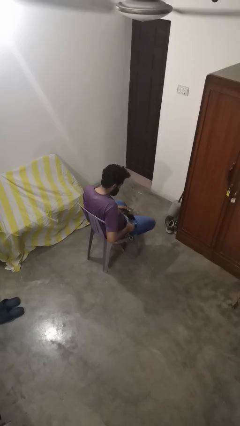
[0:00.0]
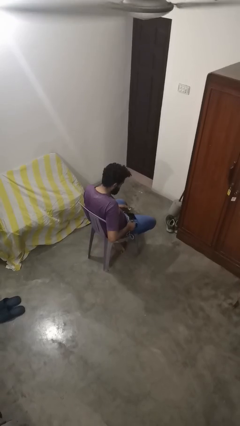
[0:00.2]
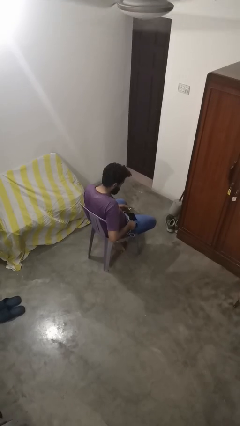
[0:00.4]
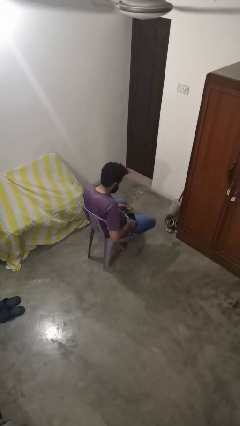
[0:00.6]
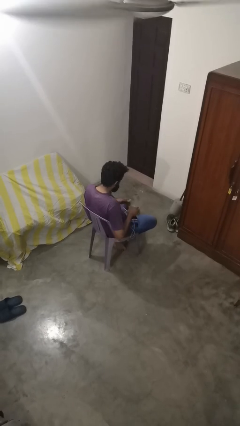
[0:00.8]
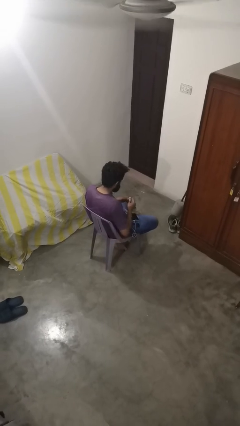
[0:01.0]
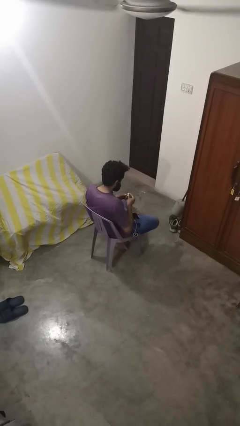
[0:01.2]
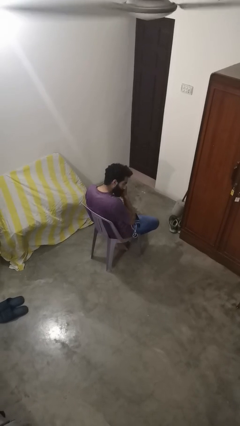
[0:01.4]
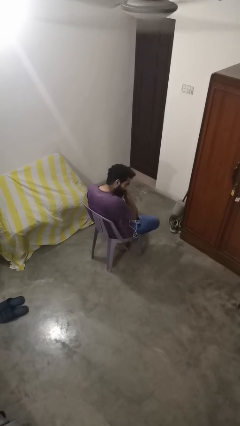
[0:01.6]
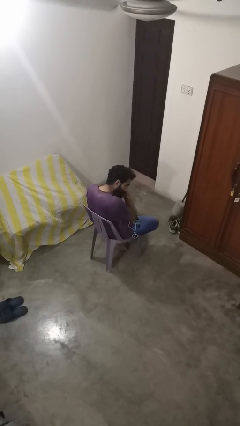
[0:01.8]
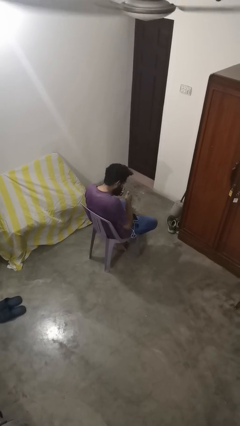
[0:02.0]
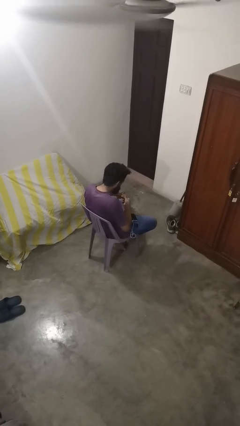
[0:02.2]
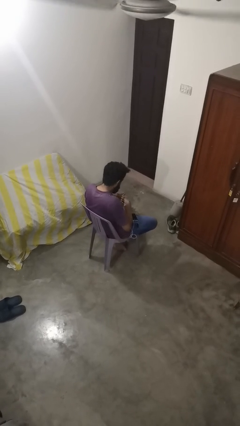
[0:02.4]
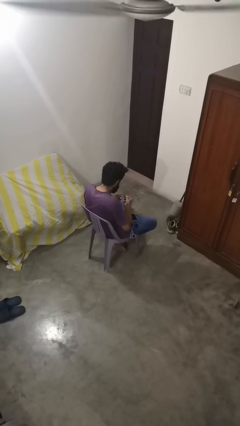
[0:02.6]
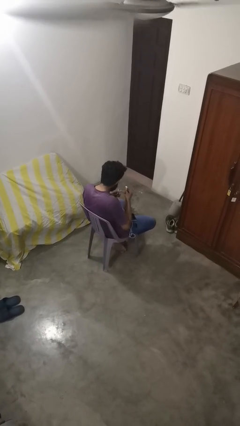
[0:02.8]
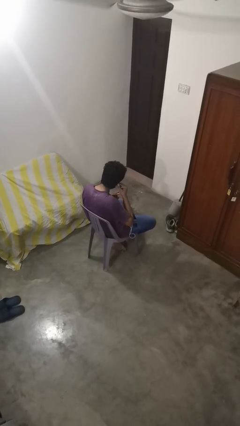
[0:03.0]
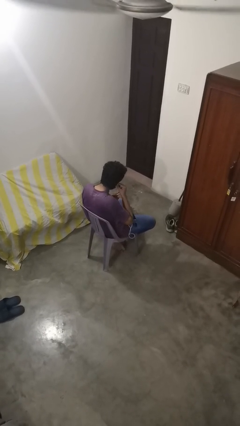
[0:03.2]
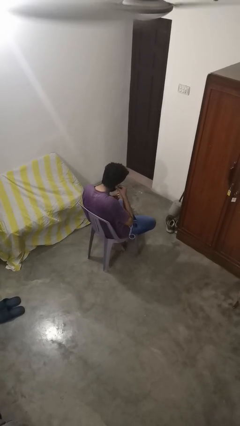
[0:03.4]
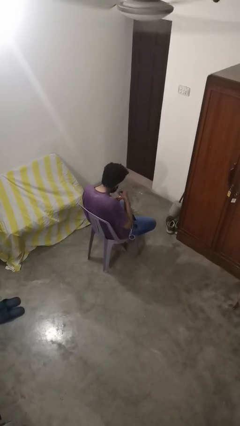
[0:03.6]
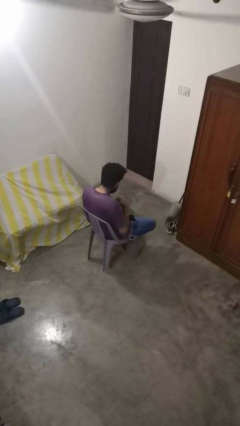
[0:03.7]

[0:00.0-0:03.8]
person puts on headphones

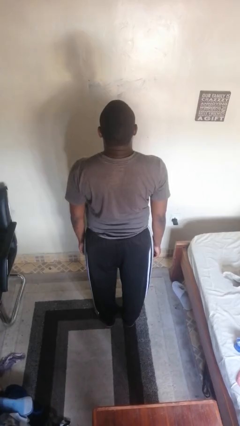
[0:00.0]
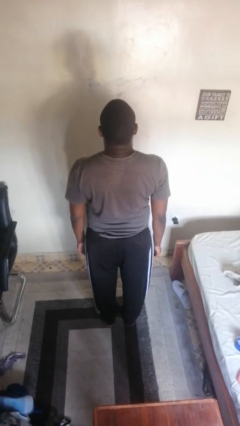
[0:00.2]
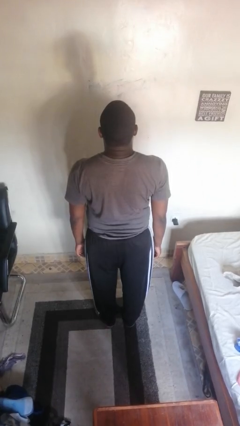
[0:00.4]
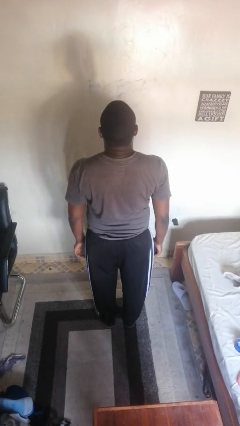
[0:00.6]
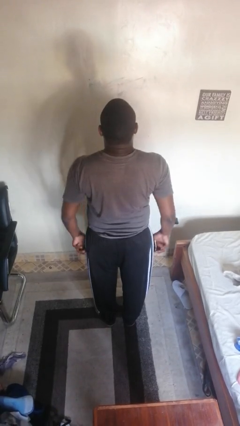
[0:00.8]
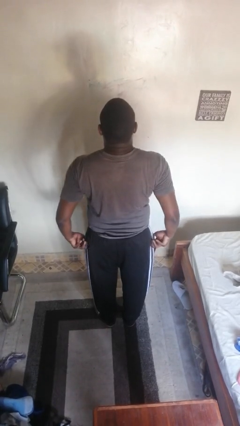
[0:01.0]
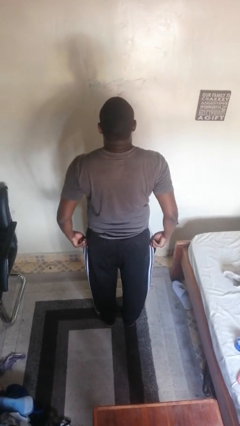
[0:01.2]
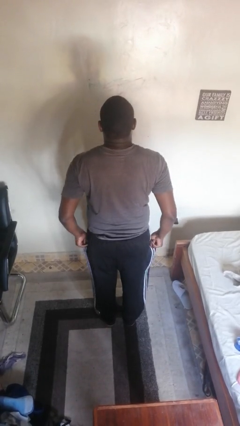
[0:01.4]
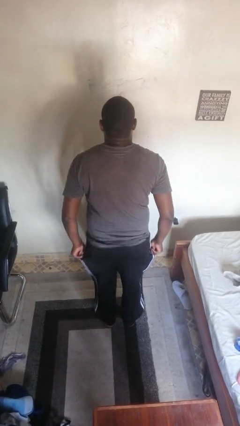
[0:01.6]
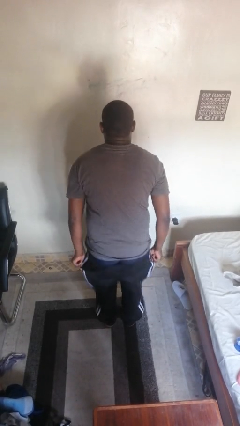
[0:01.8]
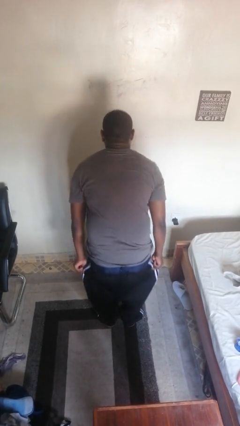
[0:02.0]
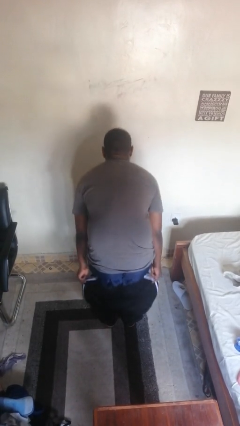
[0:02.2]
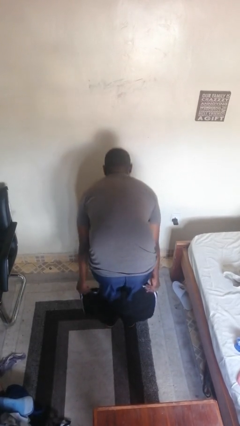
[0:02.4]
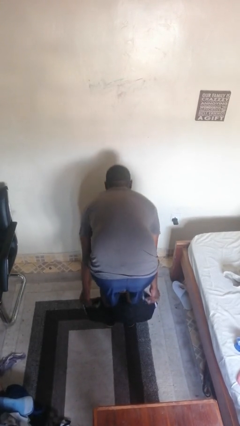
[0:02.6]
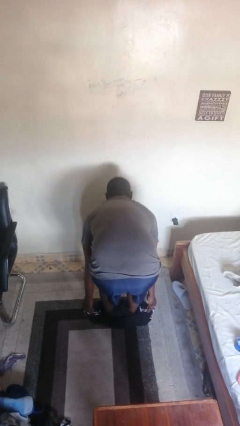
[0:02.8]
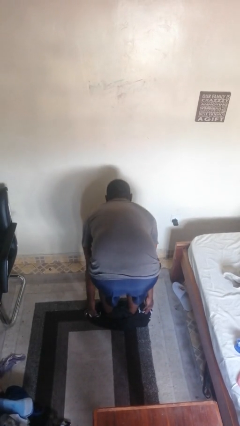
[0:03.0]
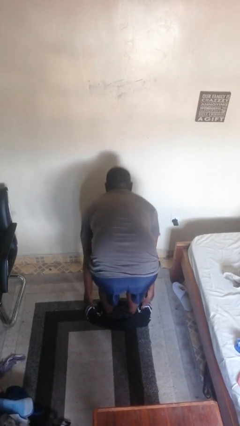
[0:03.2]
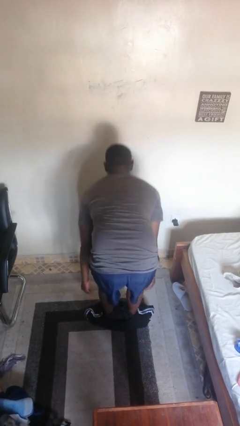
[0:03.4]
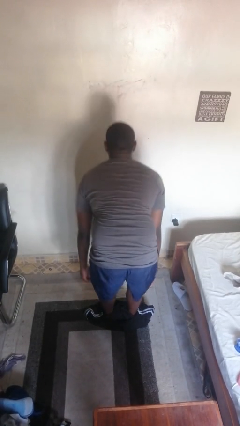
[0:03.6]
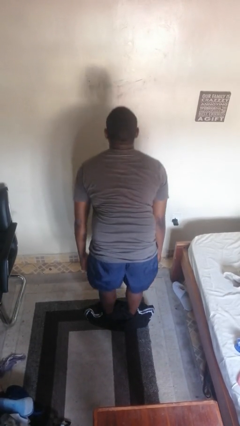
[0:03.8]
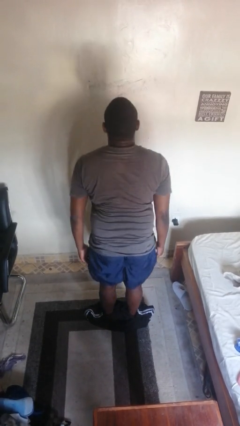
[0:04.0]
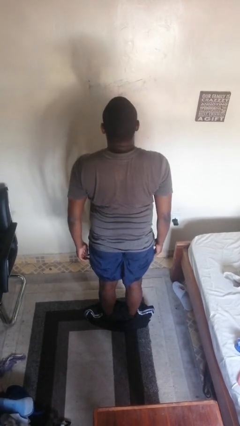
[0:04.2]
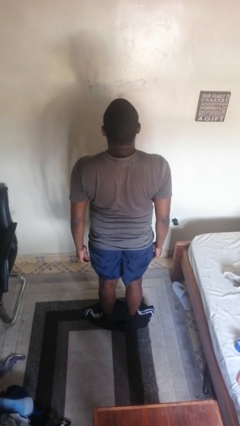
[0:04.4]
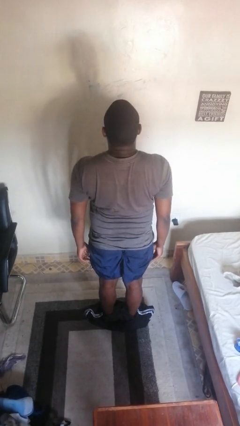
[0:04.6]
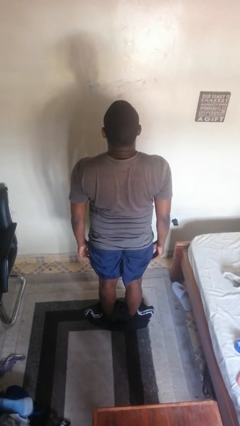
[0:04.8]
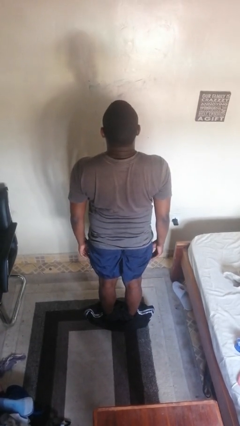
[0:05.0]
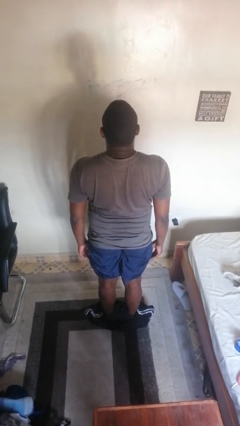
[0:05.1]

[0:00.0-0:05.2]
person takes off pants

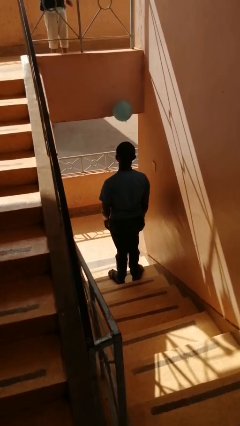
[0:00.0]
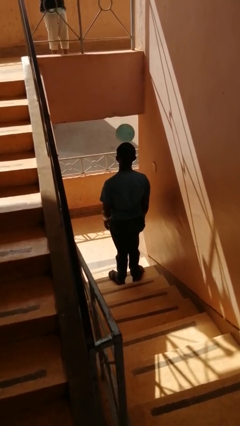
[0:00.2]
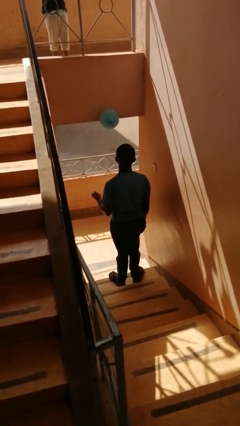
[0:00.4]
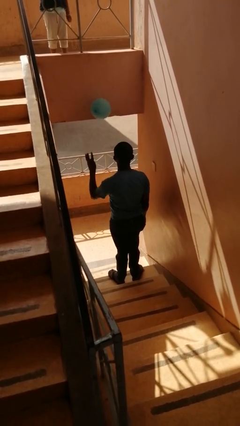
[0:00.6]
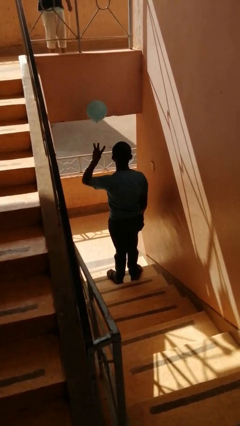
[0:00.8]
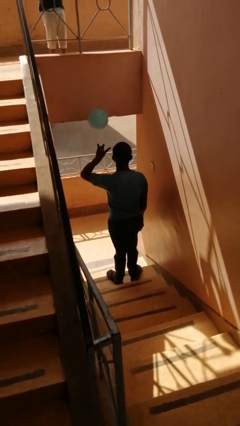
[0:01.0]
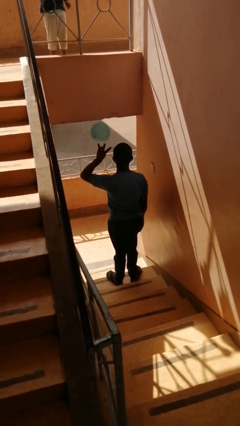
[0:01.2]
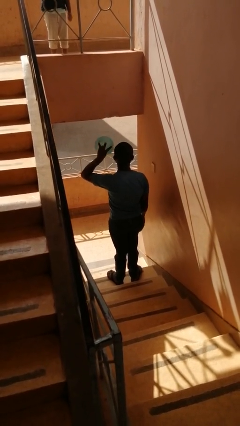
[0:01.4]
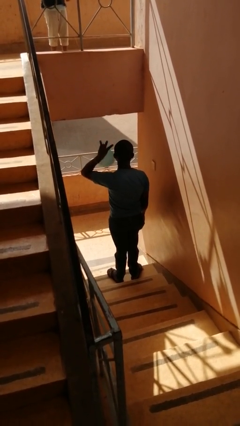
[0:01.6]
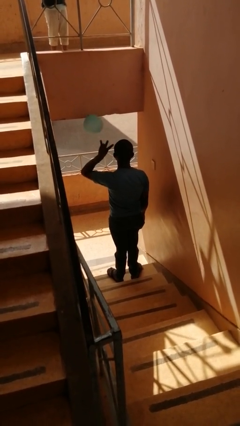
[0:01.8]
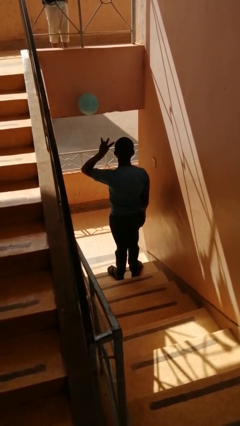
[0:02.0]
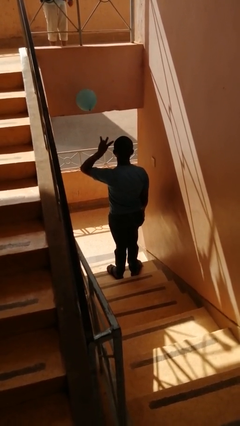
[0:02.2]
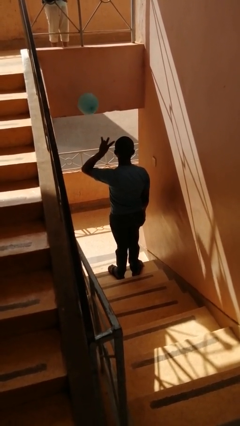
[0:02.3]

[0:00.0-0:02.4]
person gestures number three

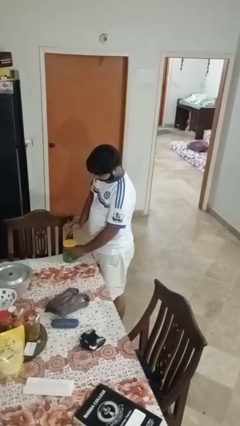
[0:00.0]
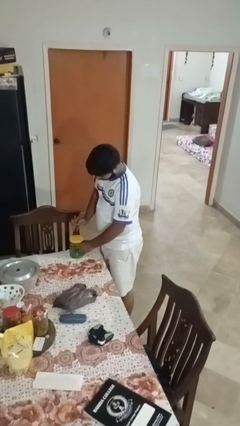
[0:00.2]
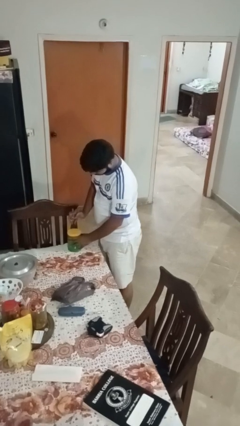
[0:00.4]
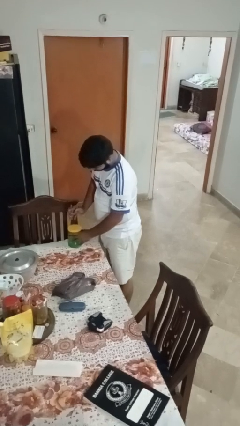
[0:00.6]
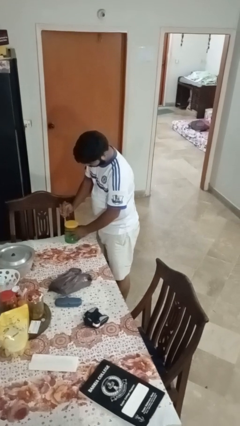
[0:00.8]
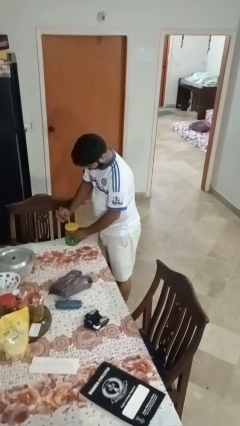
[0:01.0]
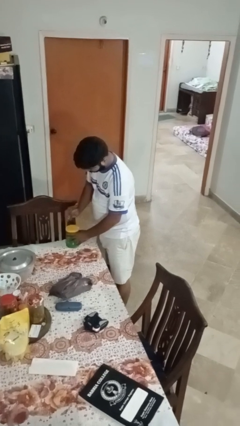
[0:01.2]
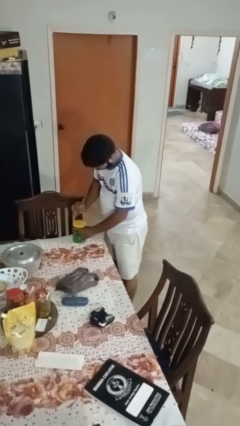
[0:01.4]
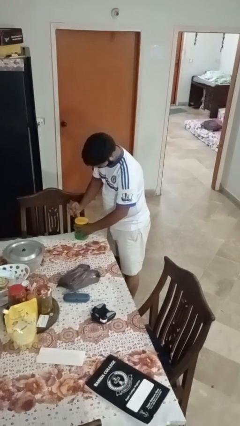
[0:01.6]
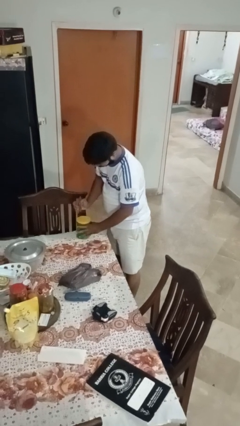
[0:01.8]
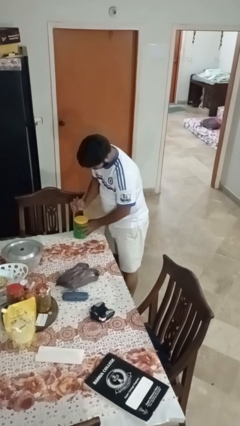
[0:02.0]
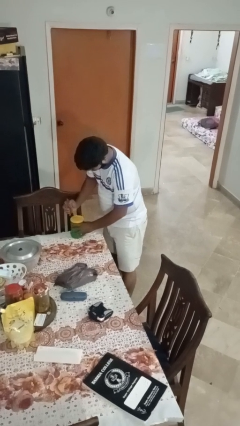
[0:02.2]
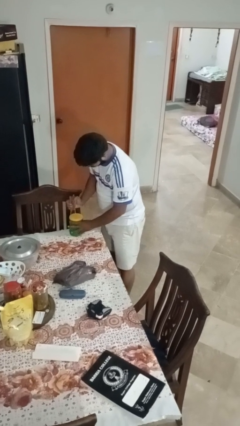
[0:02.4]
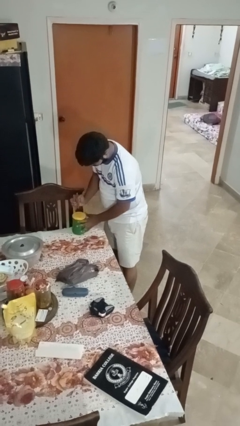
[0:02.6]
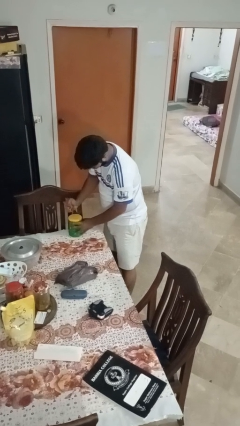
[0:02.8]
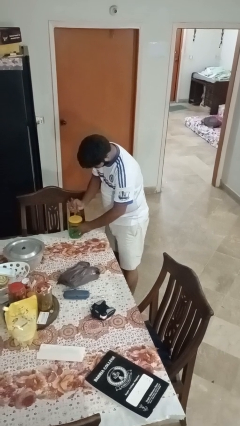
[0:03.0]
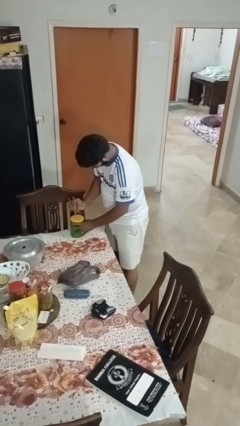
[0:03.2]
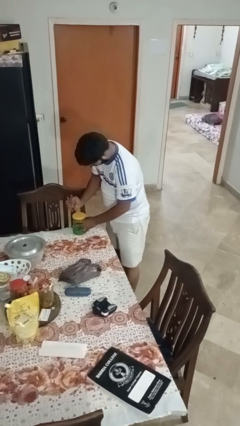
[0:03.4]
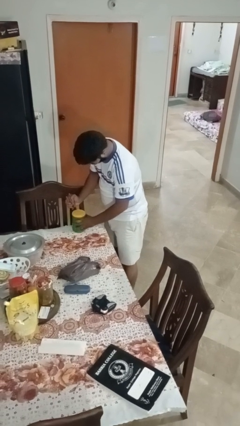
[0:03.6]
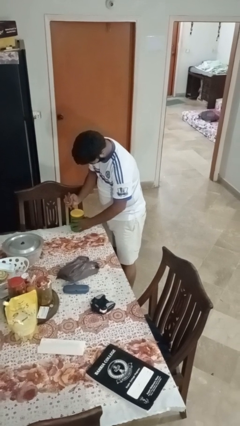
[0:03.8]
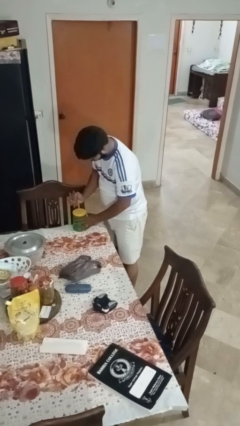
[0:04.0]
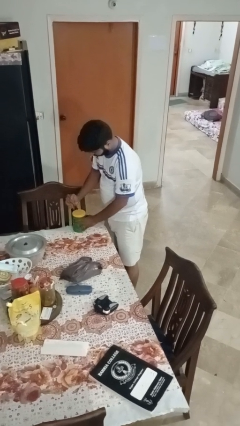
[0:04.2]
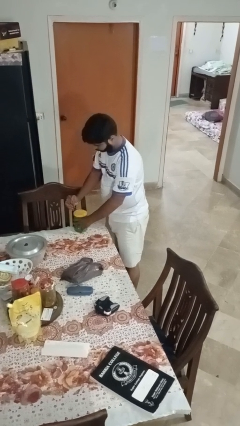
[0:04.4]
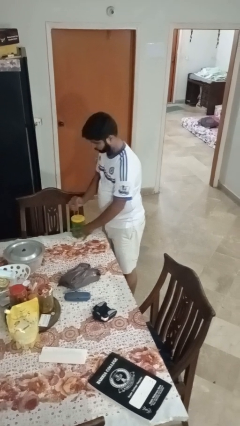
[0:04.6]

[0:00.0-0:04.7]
person opens can with can opener

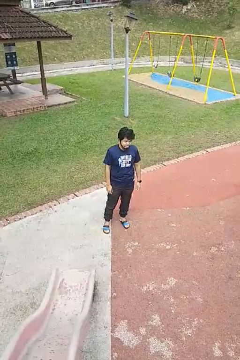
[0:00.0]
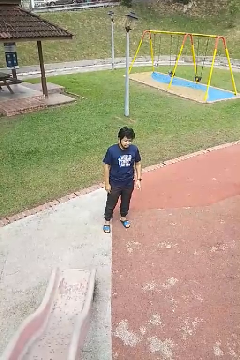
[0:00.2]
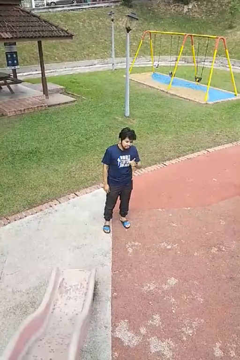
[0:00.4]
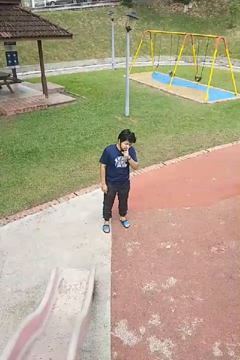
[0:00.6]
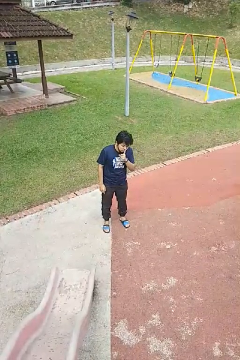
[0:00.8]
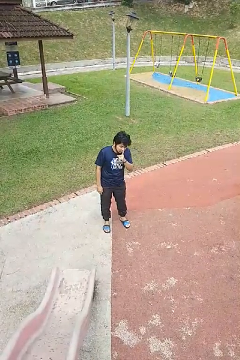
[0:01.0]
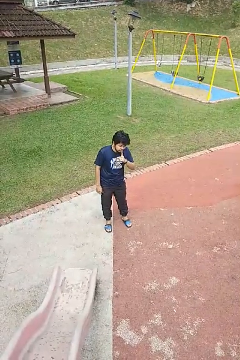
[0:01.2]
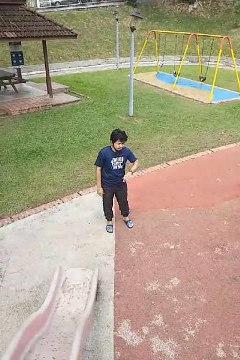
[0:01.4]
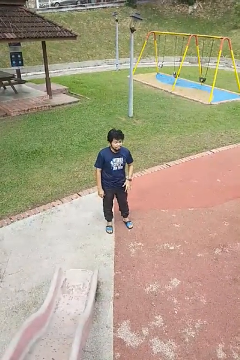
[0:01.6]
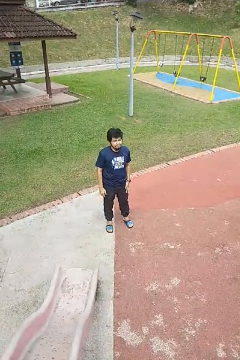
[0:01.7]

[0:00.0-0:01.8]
person gestures be quiet
